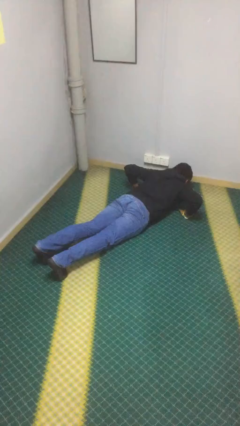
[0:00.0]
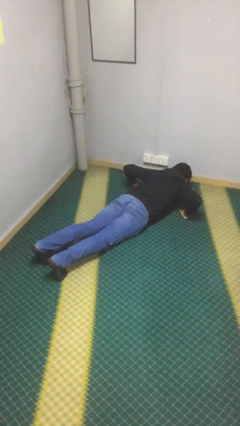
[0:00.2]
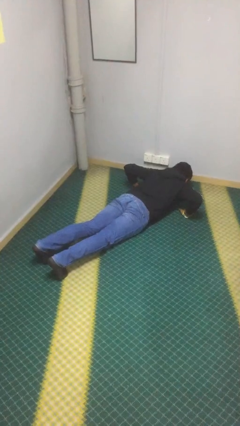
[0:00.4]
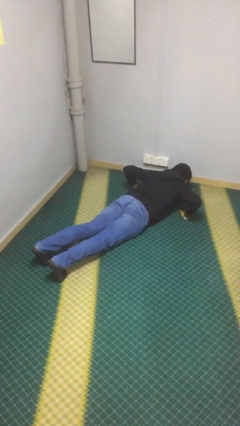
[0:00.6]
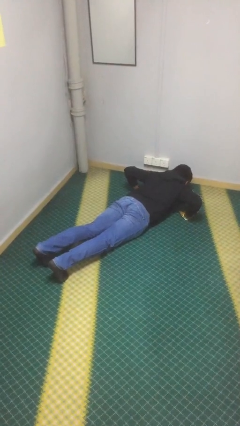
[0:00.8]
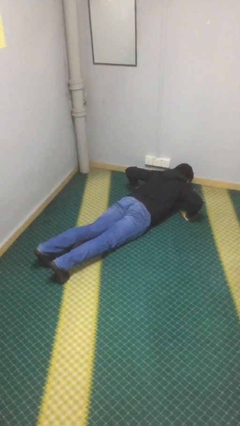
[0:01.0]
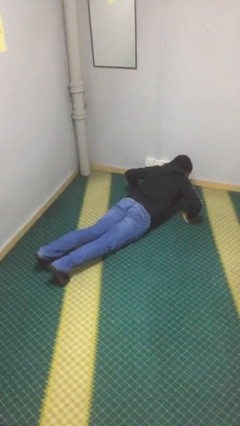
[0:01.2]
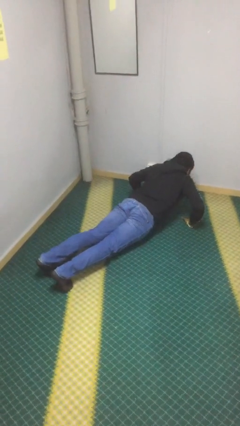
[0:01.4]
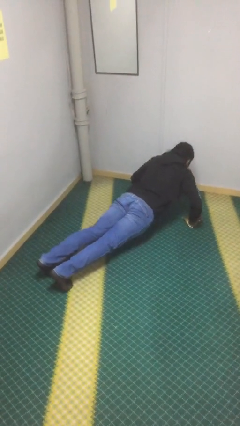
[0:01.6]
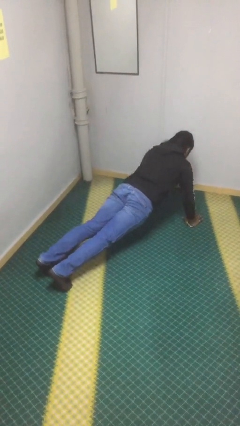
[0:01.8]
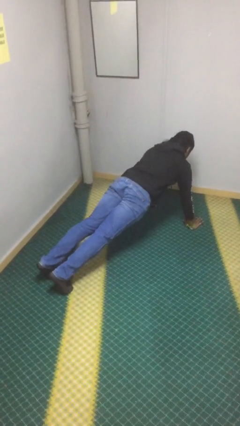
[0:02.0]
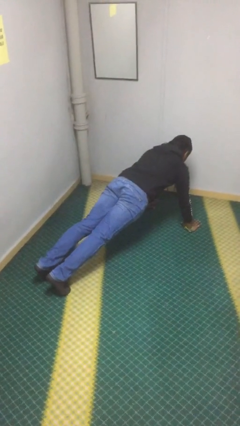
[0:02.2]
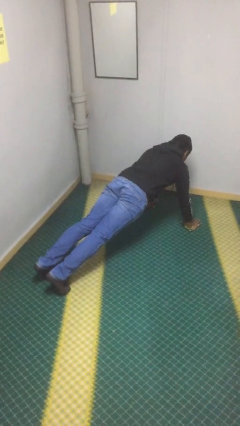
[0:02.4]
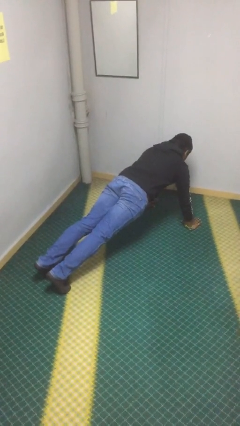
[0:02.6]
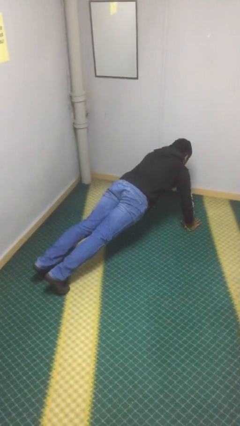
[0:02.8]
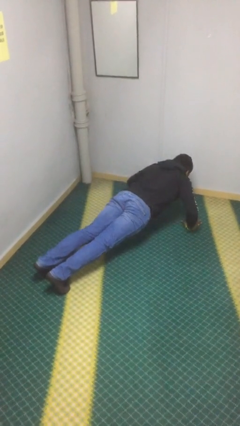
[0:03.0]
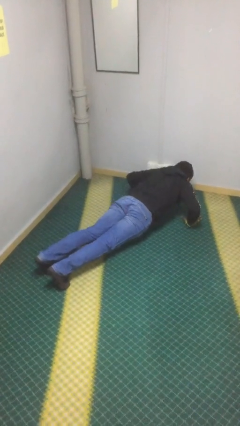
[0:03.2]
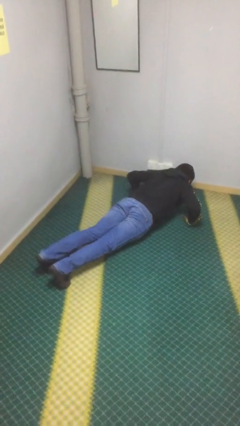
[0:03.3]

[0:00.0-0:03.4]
person exercises with pushup

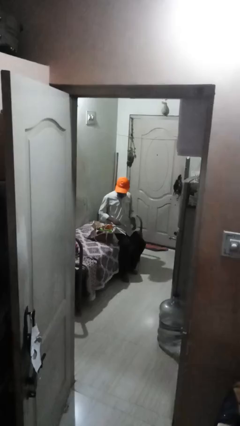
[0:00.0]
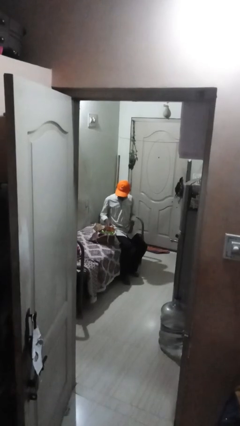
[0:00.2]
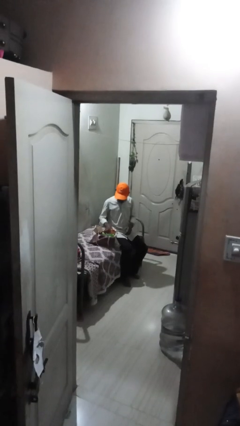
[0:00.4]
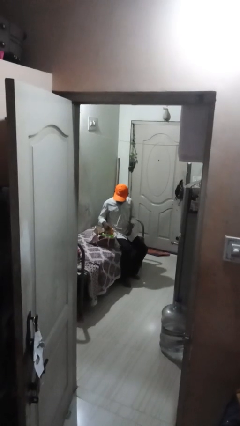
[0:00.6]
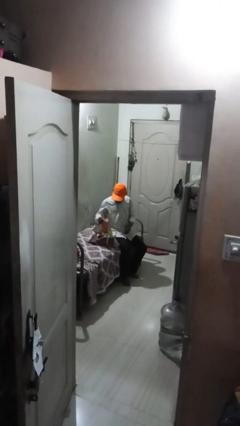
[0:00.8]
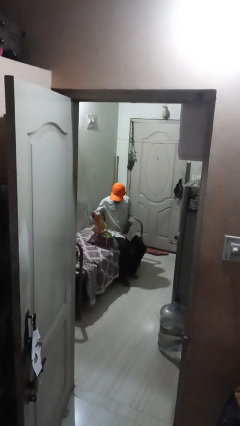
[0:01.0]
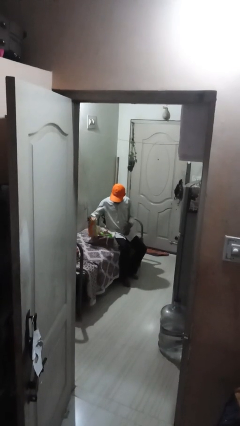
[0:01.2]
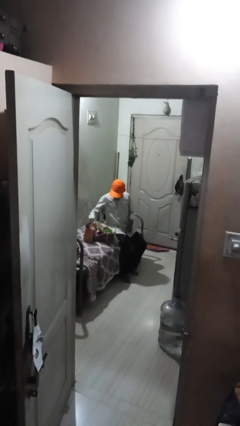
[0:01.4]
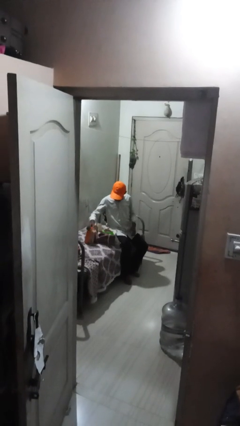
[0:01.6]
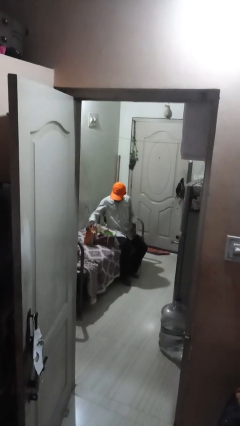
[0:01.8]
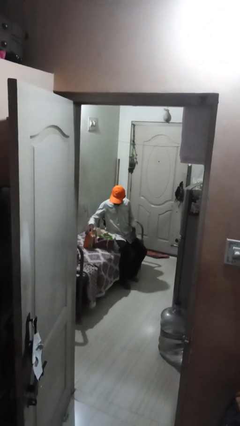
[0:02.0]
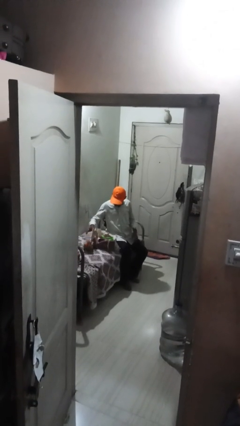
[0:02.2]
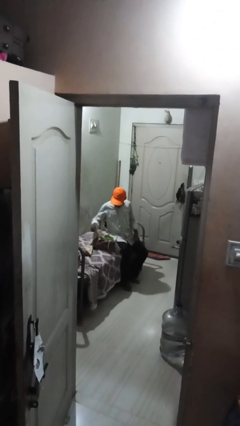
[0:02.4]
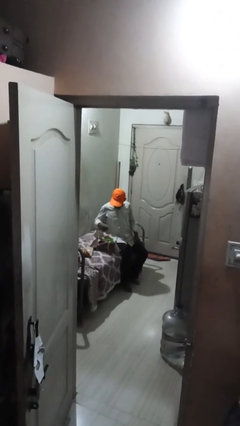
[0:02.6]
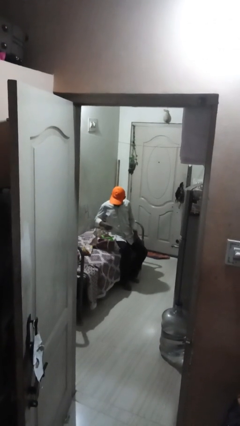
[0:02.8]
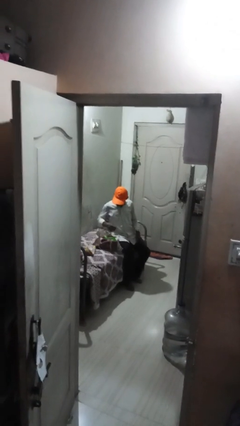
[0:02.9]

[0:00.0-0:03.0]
person takes object from bag

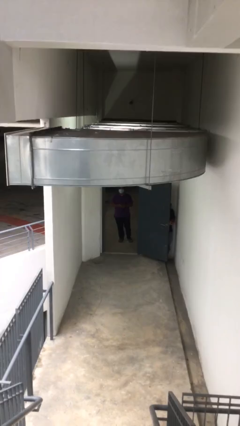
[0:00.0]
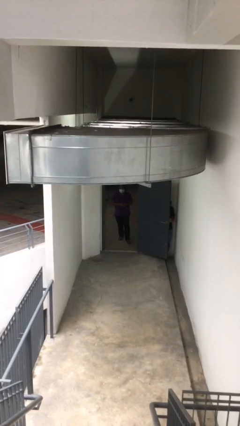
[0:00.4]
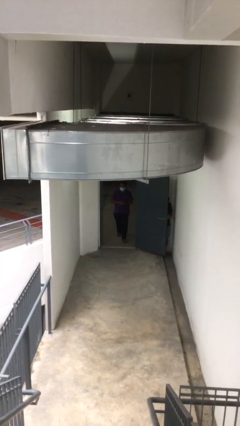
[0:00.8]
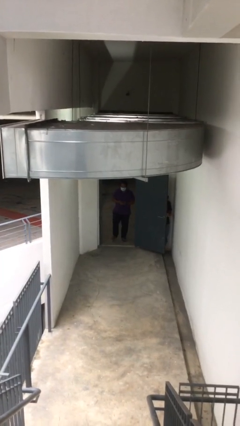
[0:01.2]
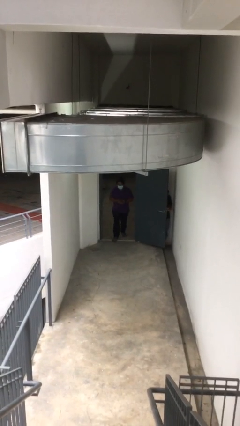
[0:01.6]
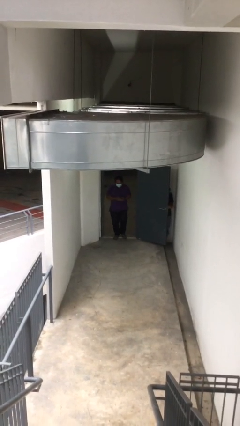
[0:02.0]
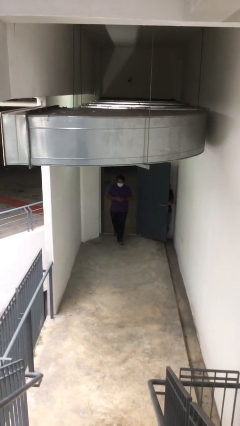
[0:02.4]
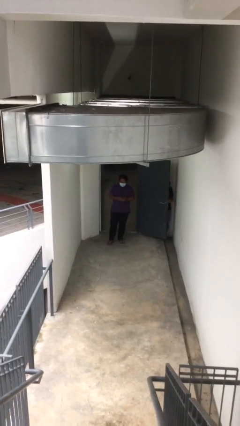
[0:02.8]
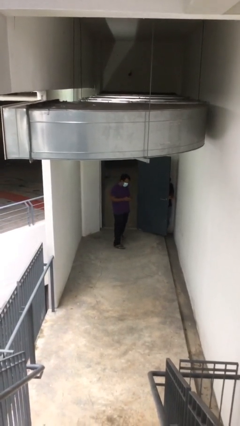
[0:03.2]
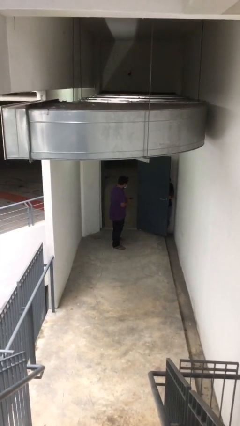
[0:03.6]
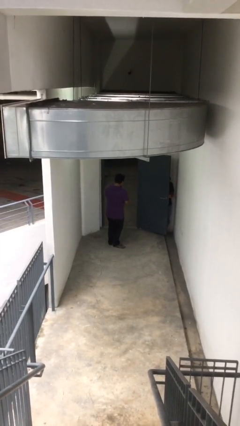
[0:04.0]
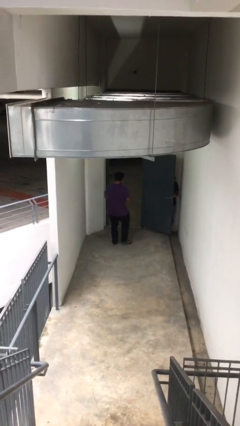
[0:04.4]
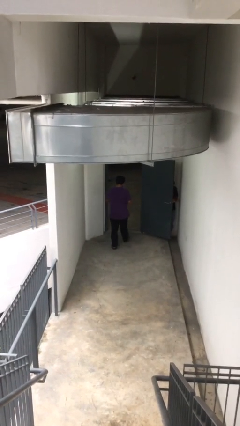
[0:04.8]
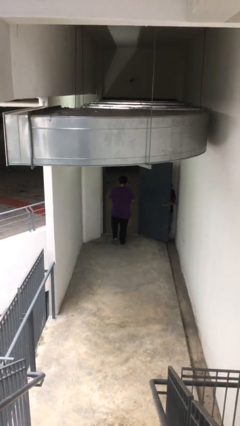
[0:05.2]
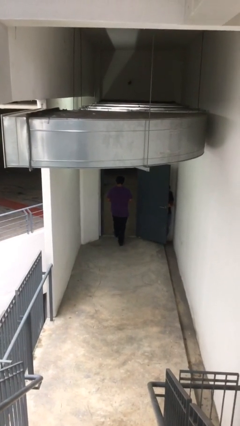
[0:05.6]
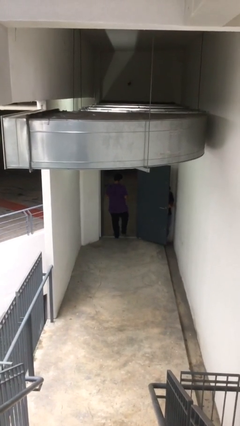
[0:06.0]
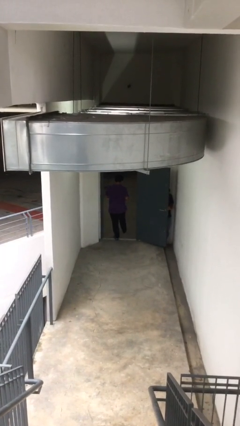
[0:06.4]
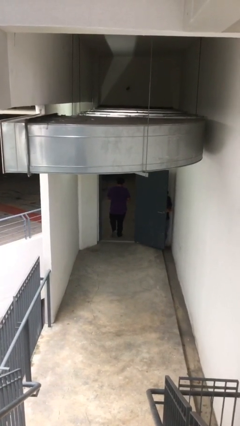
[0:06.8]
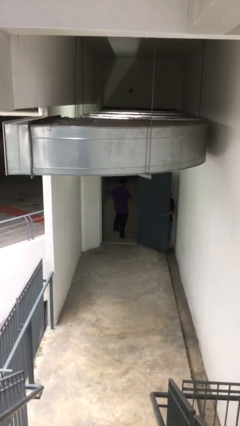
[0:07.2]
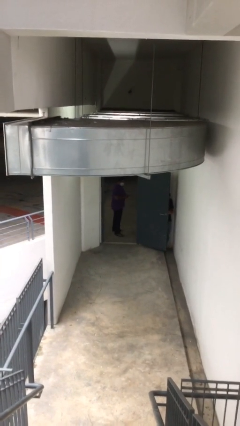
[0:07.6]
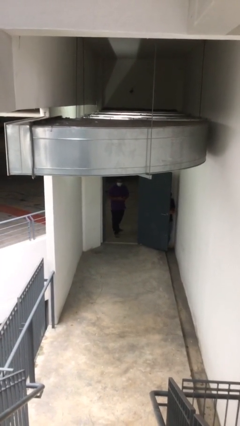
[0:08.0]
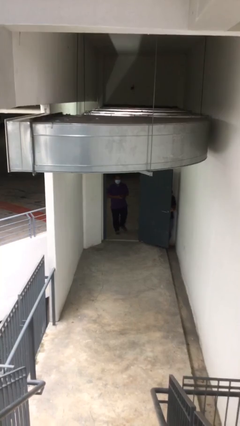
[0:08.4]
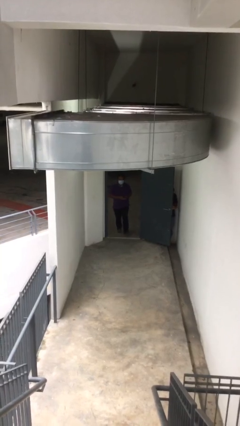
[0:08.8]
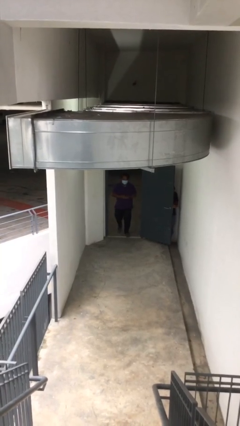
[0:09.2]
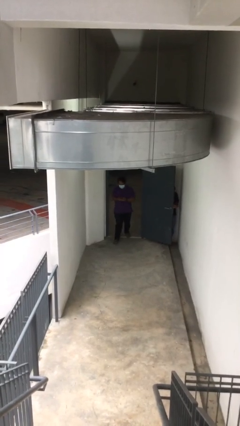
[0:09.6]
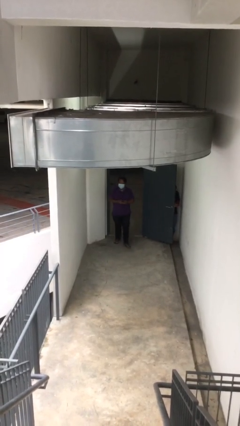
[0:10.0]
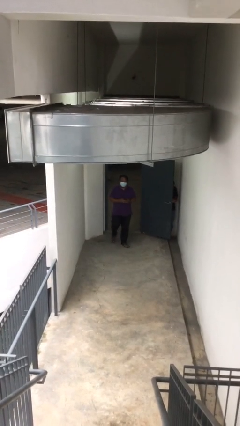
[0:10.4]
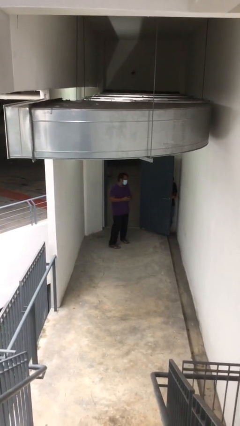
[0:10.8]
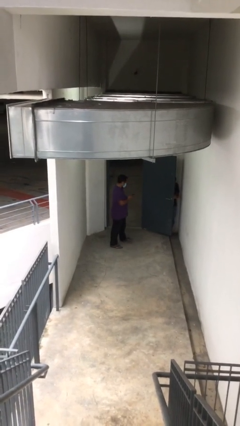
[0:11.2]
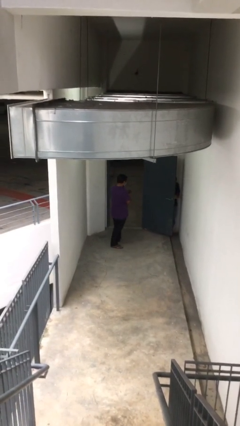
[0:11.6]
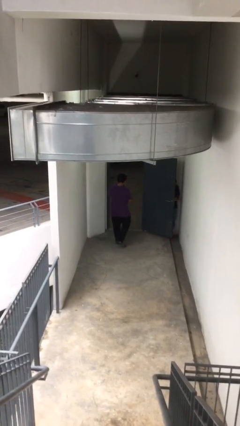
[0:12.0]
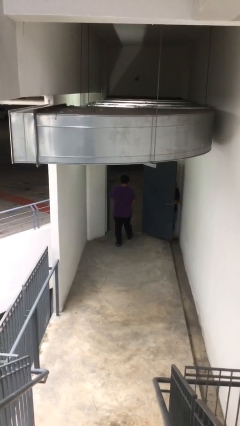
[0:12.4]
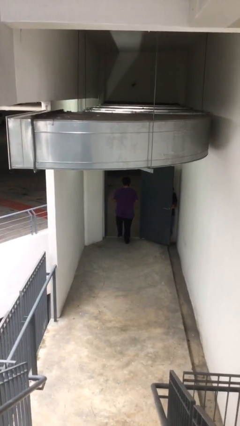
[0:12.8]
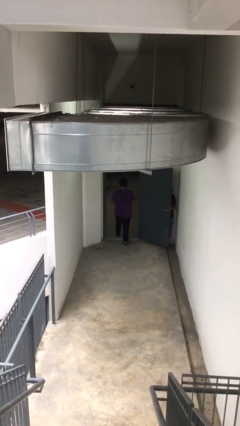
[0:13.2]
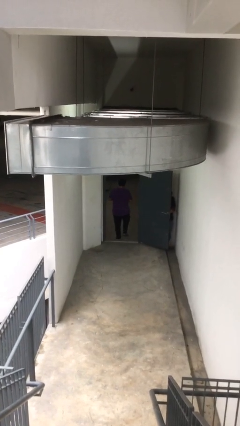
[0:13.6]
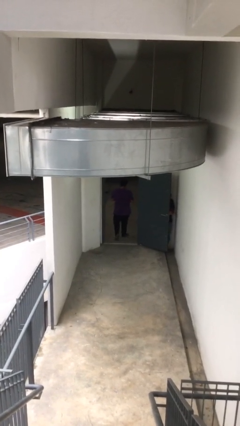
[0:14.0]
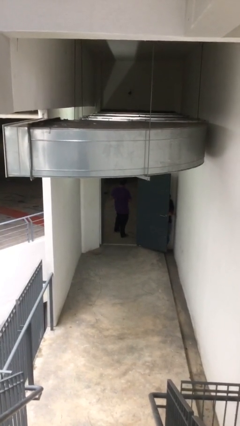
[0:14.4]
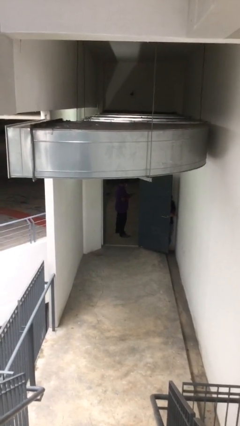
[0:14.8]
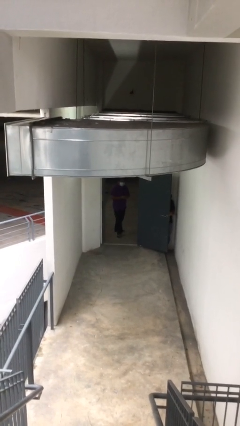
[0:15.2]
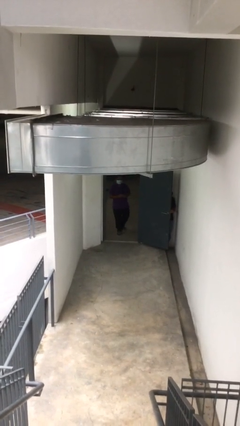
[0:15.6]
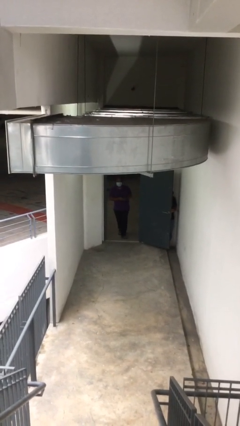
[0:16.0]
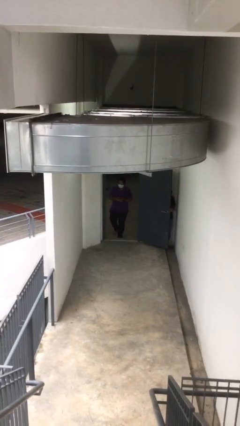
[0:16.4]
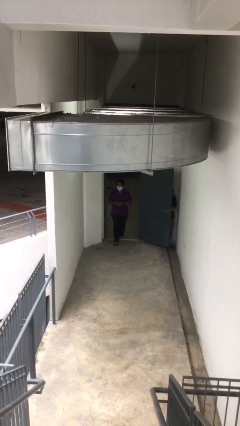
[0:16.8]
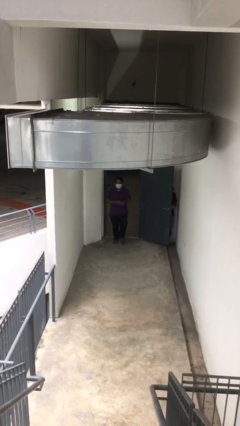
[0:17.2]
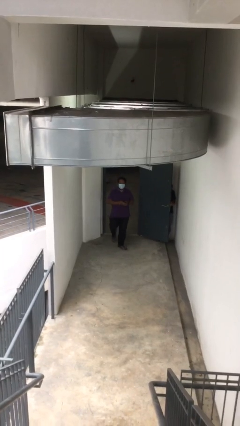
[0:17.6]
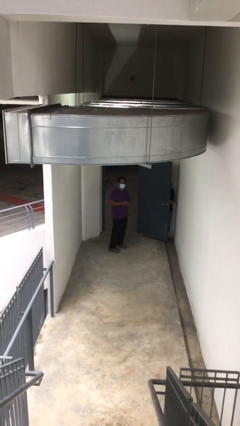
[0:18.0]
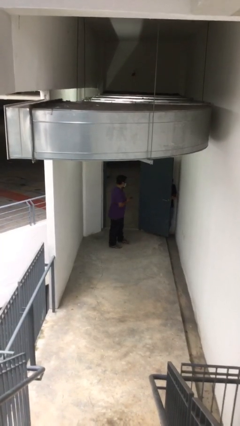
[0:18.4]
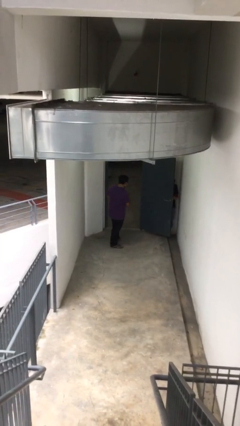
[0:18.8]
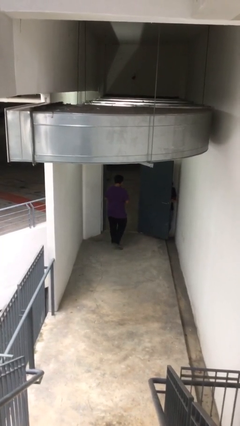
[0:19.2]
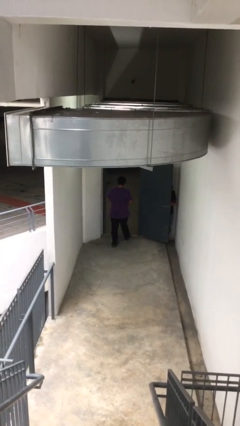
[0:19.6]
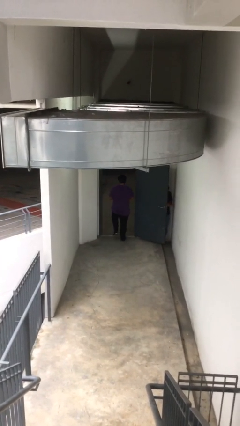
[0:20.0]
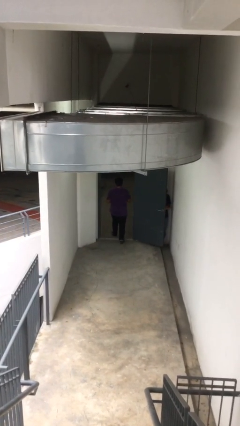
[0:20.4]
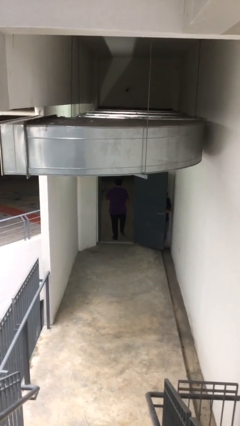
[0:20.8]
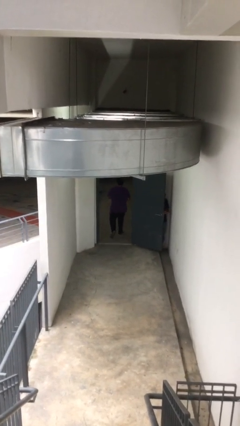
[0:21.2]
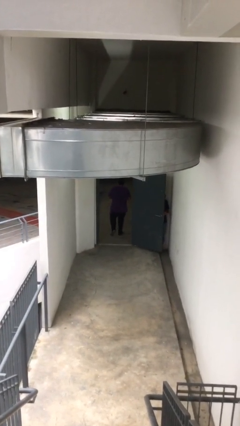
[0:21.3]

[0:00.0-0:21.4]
person texts on phone

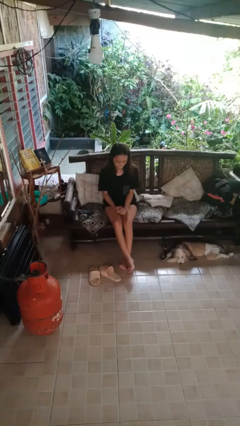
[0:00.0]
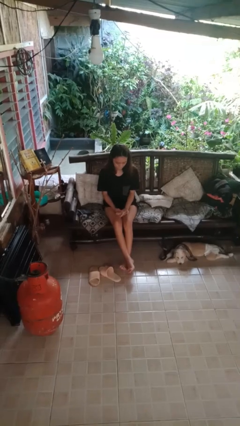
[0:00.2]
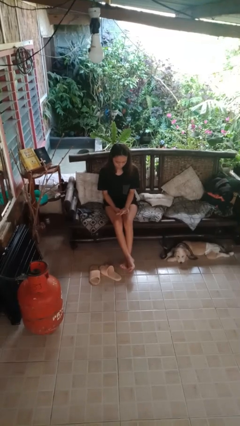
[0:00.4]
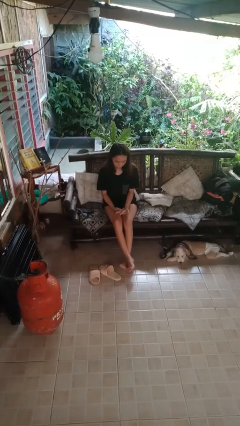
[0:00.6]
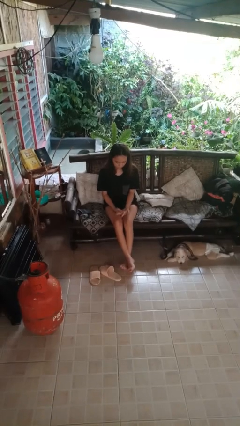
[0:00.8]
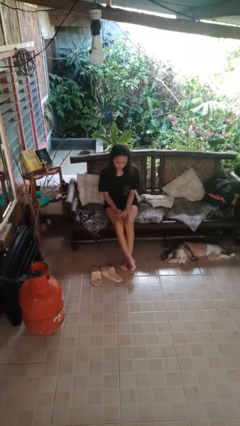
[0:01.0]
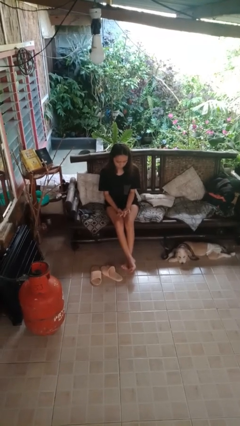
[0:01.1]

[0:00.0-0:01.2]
person looks at hands in lap
